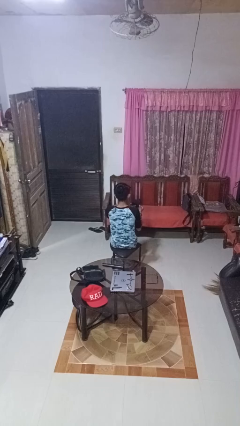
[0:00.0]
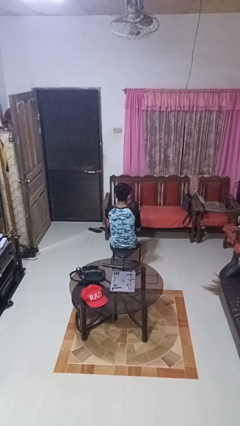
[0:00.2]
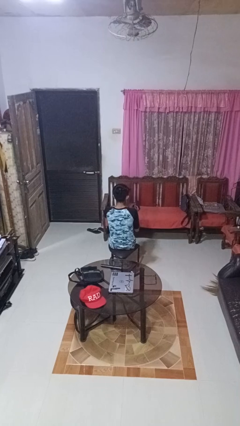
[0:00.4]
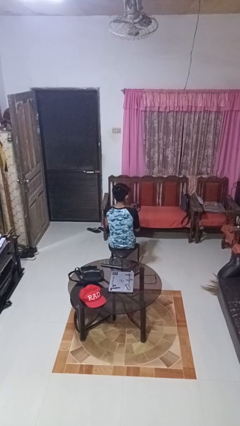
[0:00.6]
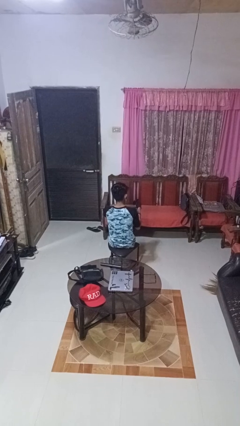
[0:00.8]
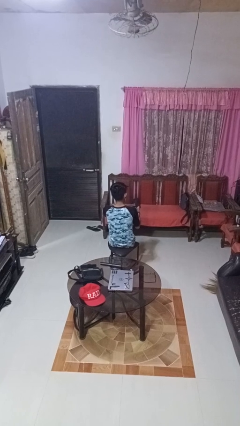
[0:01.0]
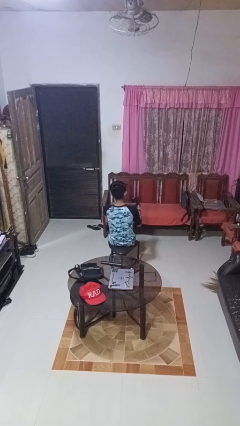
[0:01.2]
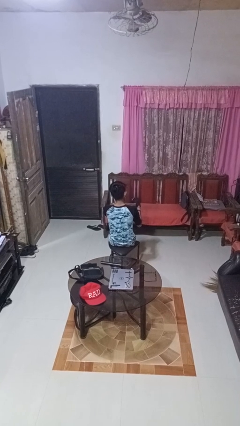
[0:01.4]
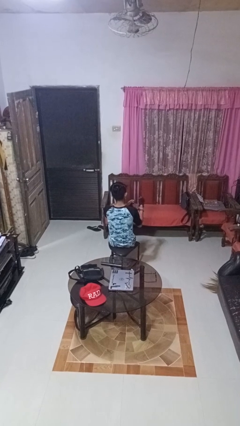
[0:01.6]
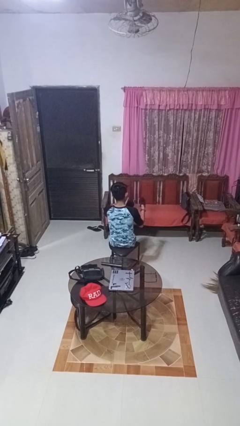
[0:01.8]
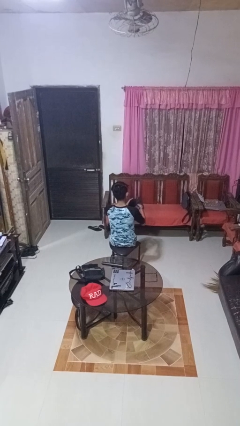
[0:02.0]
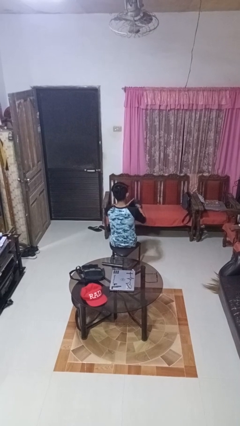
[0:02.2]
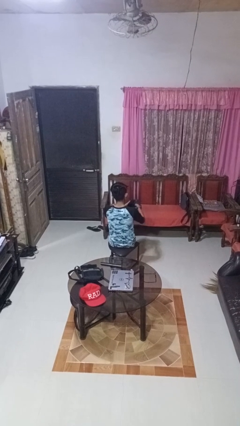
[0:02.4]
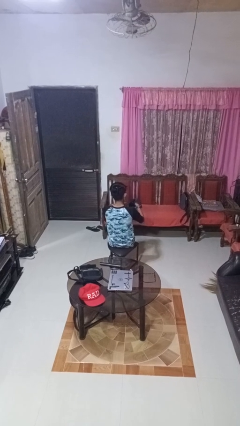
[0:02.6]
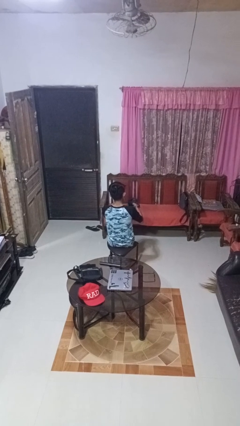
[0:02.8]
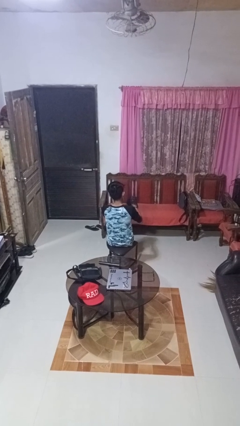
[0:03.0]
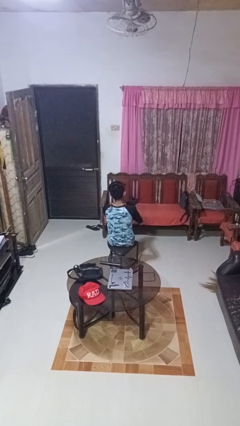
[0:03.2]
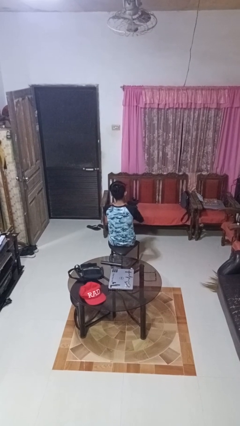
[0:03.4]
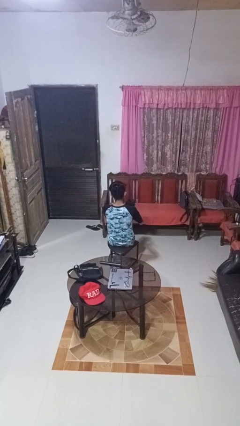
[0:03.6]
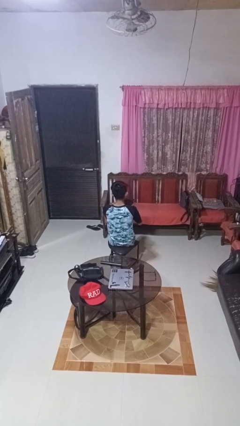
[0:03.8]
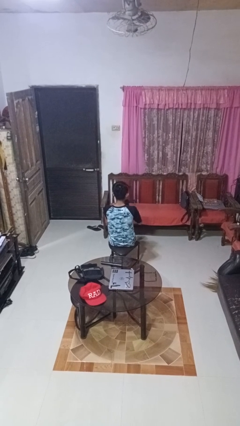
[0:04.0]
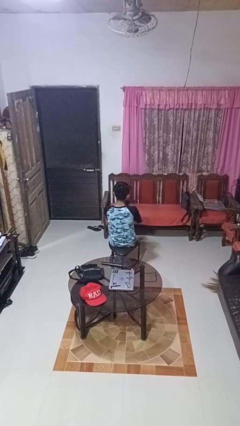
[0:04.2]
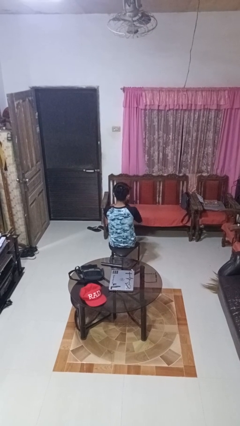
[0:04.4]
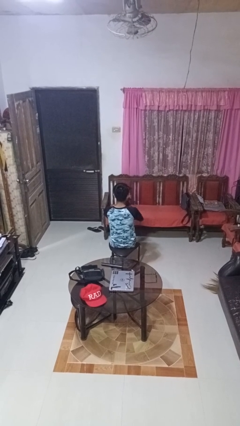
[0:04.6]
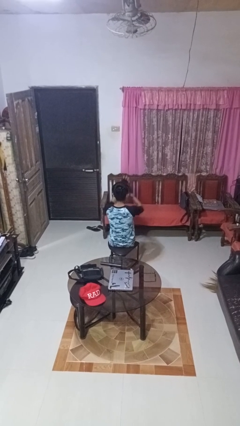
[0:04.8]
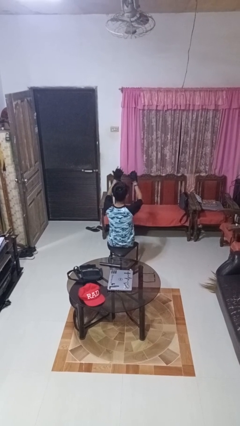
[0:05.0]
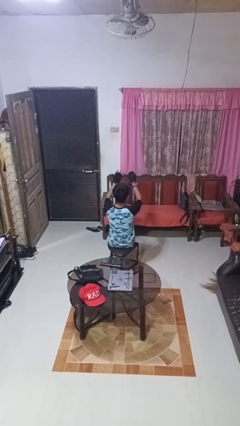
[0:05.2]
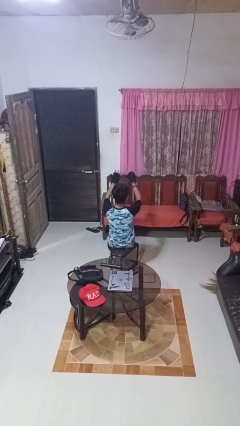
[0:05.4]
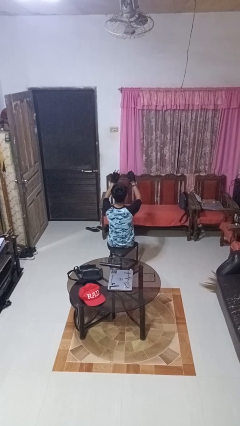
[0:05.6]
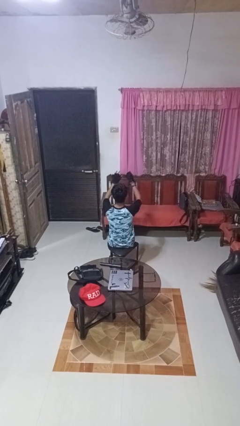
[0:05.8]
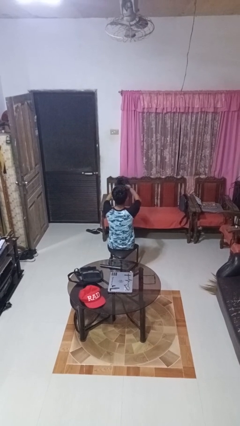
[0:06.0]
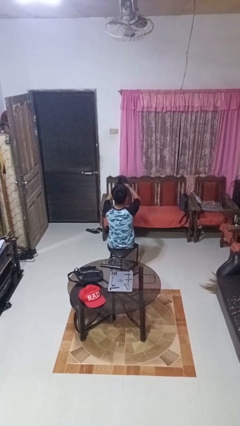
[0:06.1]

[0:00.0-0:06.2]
person puts on gloves

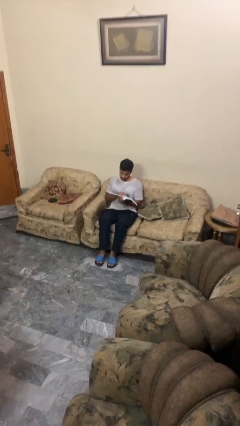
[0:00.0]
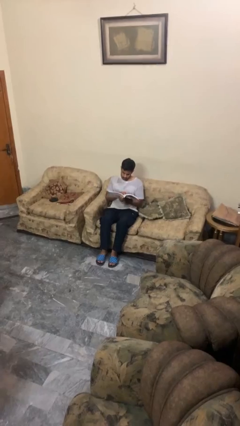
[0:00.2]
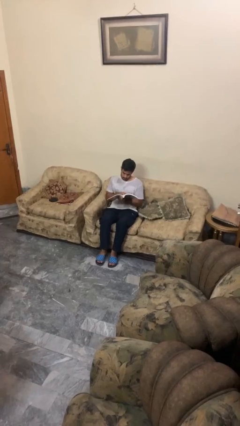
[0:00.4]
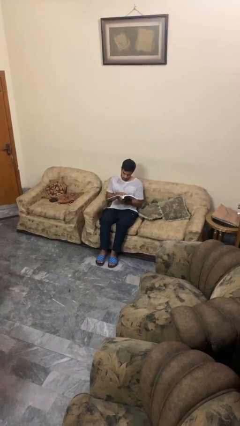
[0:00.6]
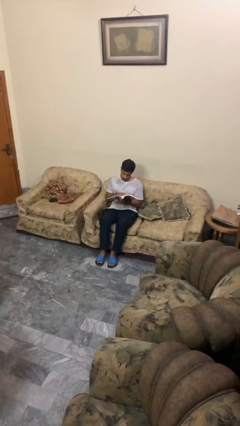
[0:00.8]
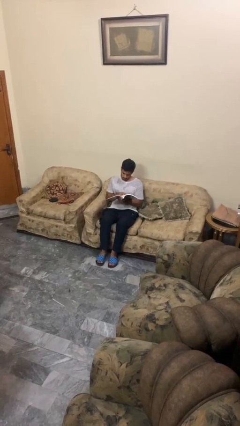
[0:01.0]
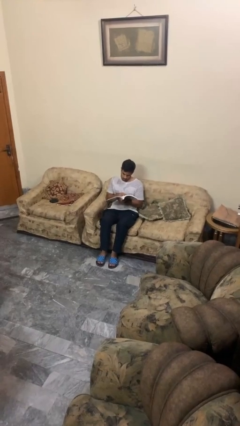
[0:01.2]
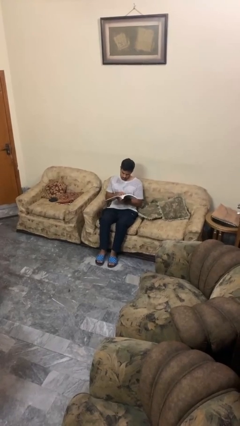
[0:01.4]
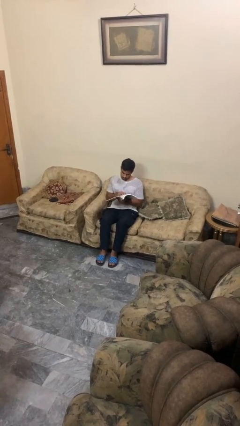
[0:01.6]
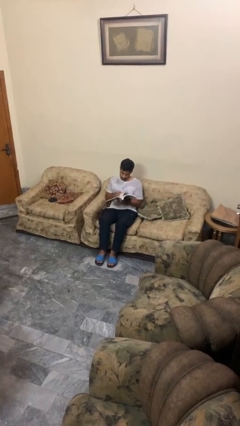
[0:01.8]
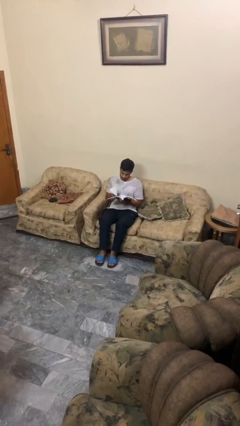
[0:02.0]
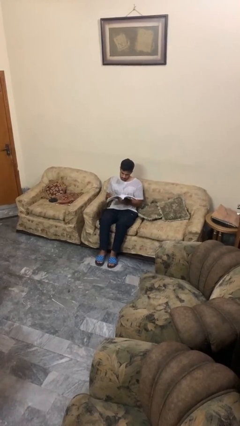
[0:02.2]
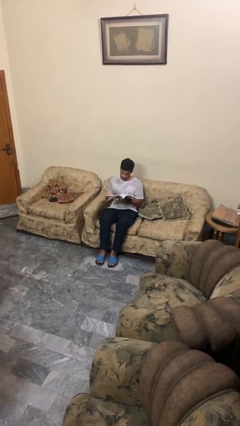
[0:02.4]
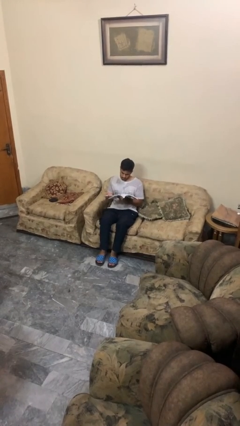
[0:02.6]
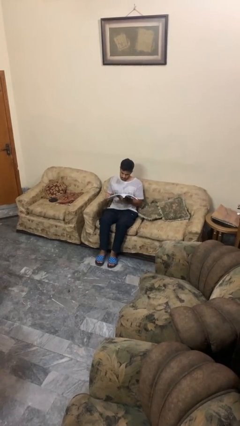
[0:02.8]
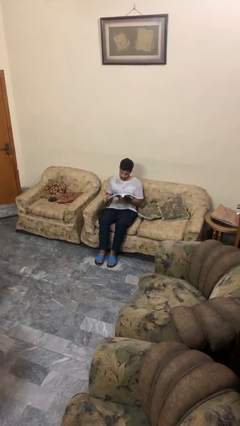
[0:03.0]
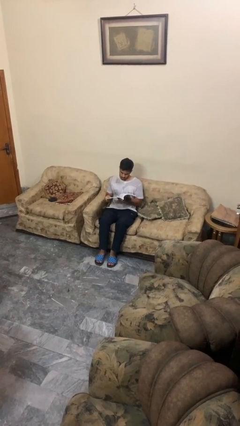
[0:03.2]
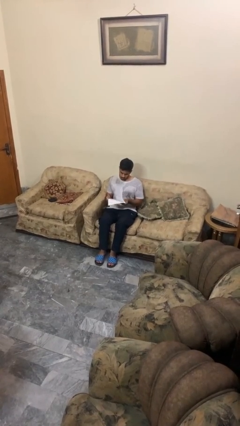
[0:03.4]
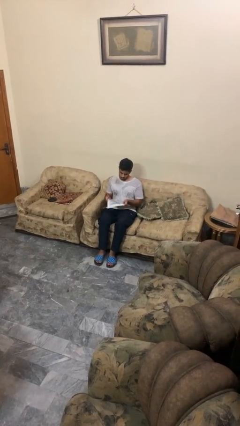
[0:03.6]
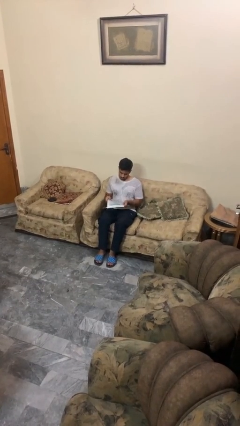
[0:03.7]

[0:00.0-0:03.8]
person reads book

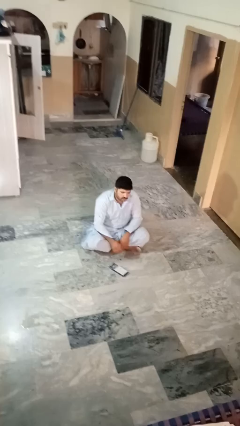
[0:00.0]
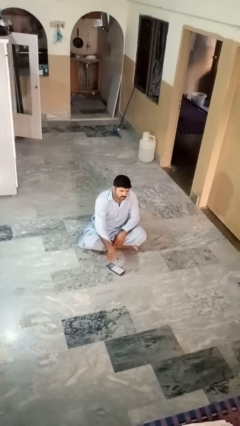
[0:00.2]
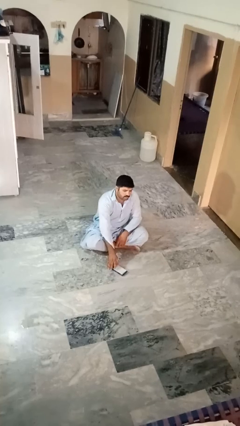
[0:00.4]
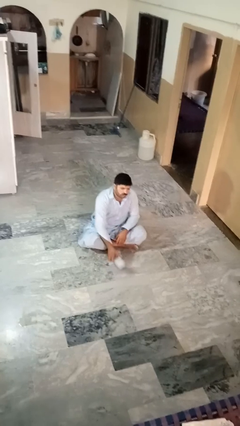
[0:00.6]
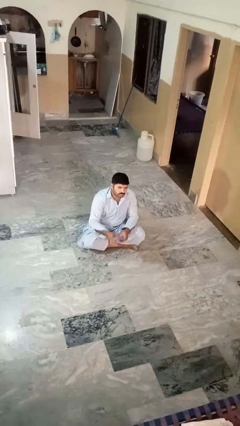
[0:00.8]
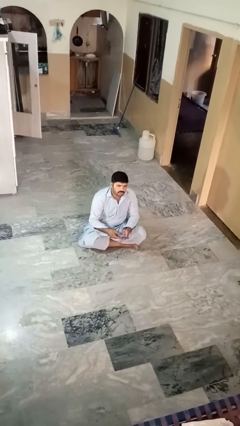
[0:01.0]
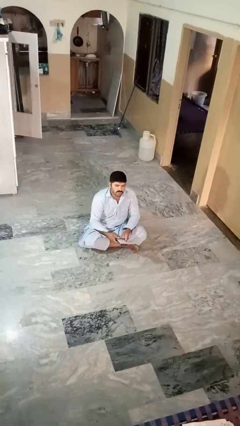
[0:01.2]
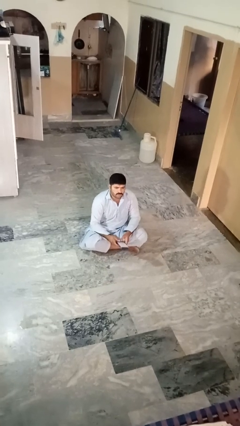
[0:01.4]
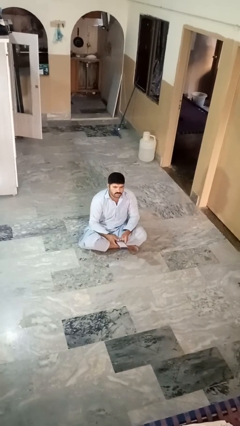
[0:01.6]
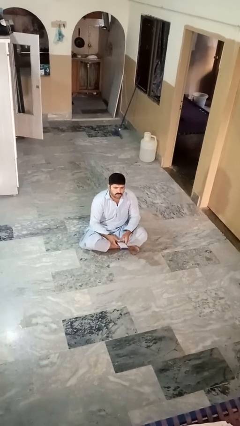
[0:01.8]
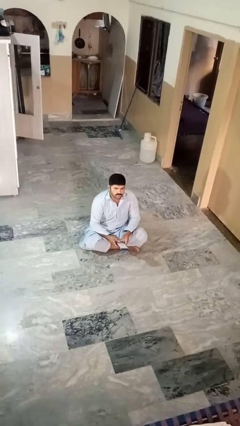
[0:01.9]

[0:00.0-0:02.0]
person picks up object from floor

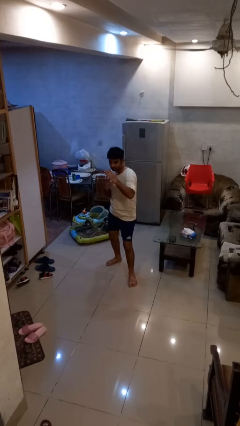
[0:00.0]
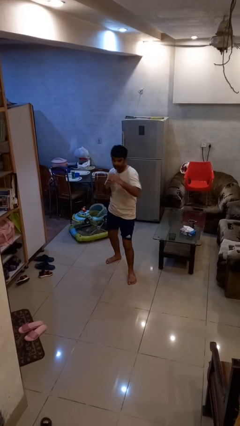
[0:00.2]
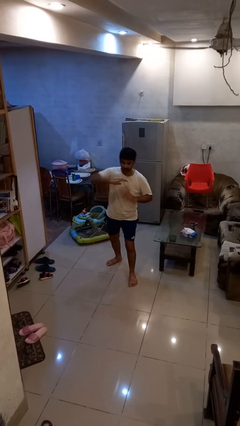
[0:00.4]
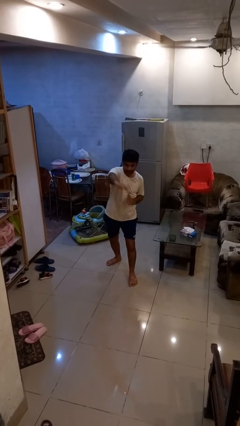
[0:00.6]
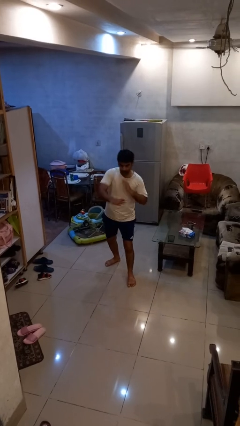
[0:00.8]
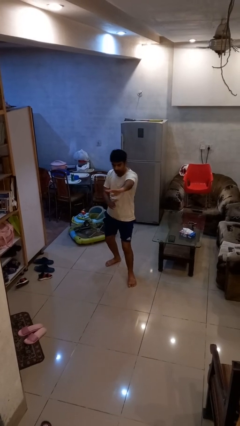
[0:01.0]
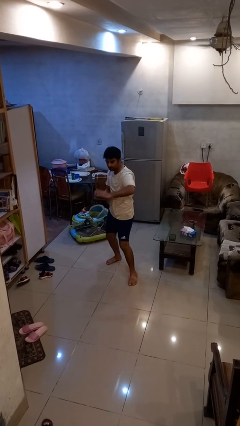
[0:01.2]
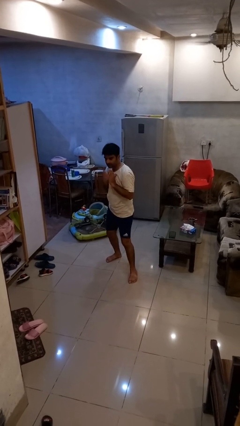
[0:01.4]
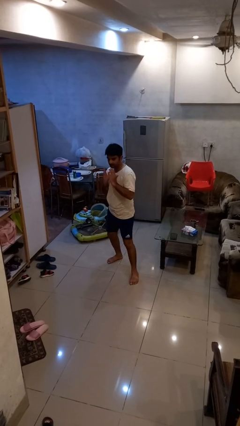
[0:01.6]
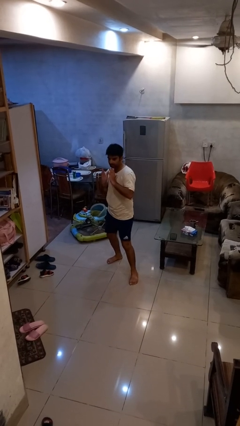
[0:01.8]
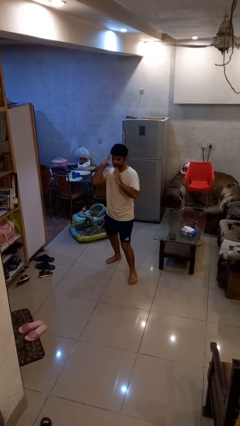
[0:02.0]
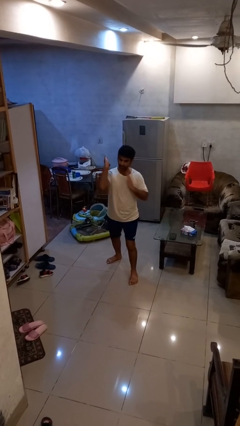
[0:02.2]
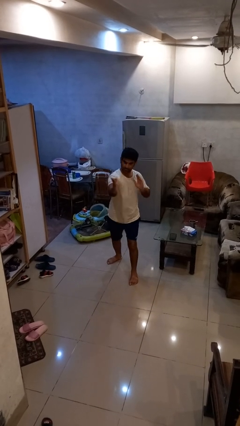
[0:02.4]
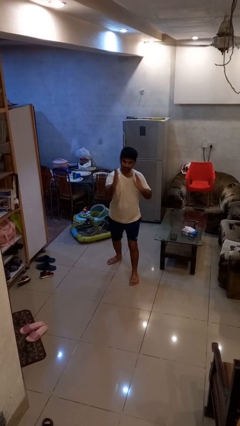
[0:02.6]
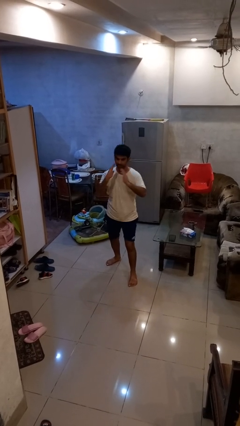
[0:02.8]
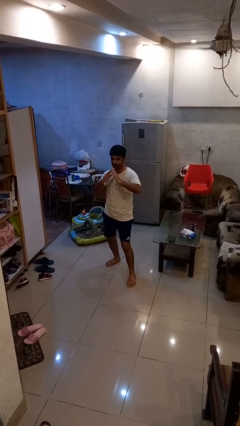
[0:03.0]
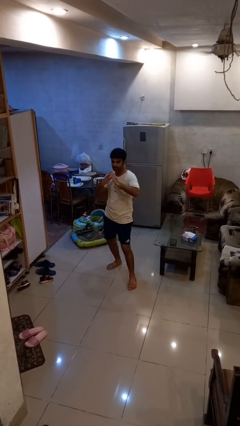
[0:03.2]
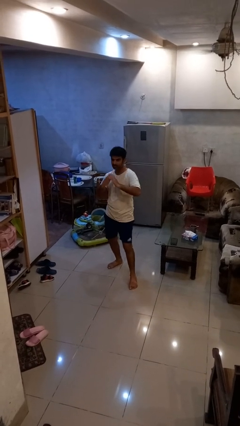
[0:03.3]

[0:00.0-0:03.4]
person karate chop

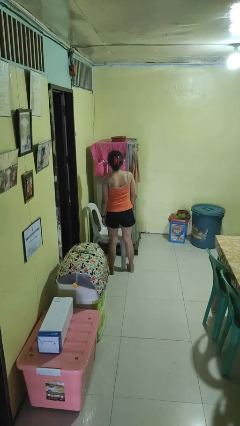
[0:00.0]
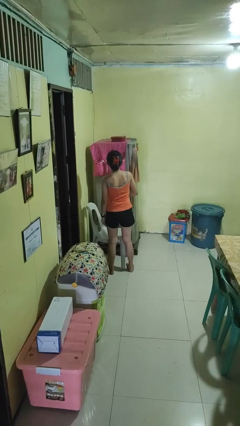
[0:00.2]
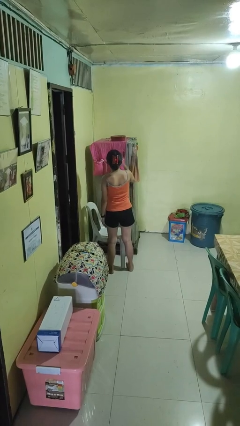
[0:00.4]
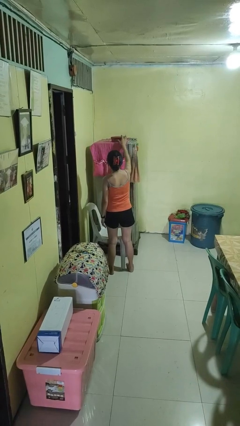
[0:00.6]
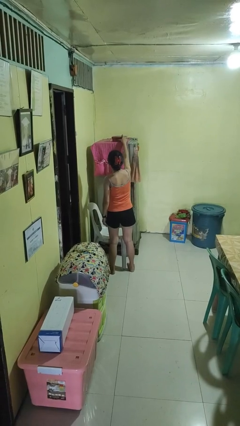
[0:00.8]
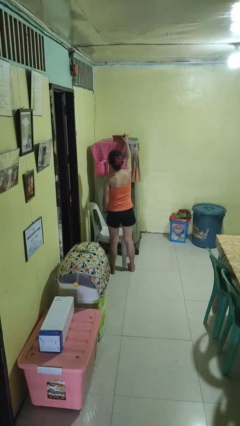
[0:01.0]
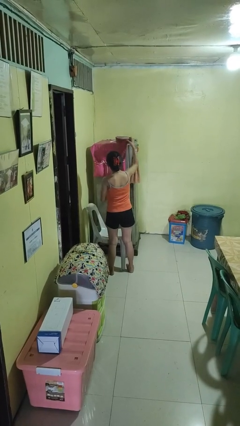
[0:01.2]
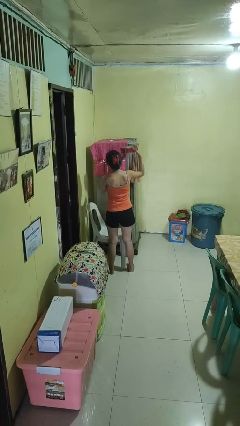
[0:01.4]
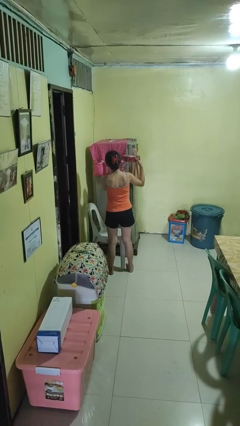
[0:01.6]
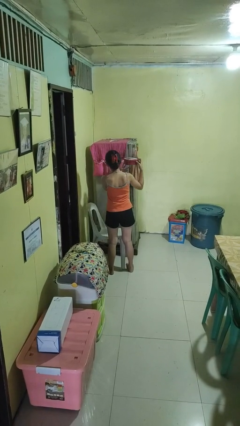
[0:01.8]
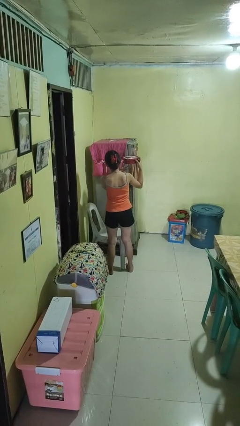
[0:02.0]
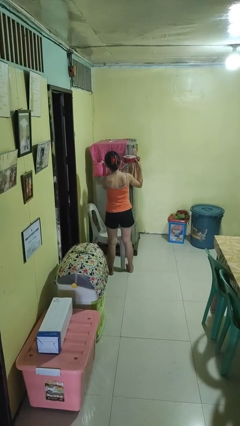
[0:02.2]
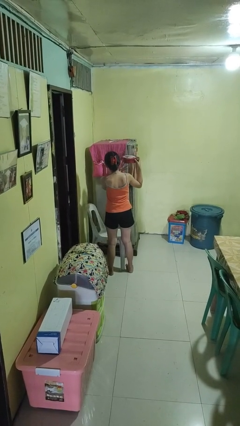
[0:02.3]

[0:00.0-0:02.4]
person picks up object from shelf
